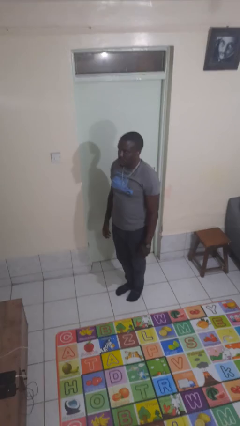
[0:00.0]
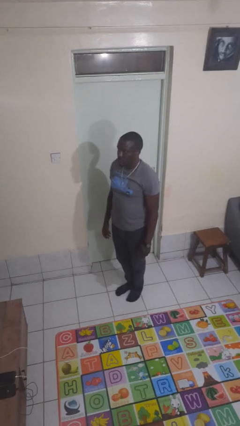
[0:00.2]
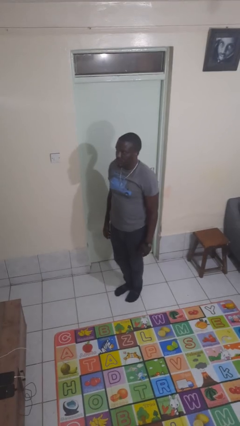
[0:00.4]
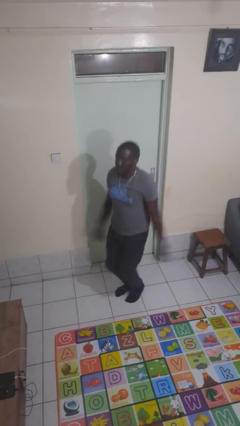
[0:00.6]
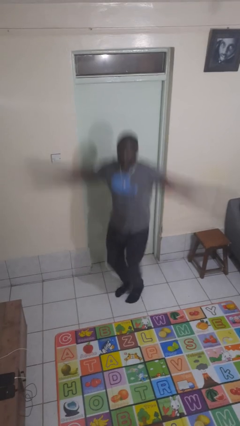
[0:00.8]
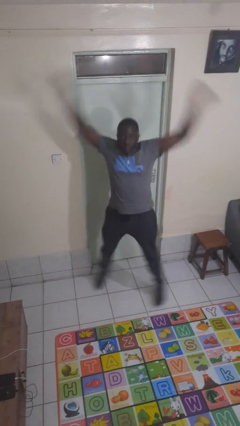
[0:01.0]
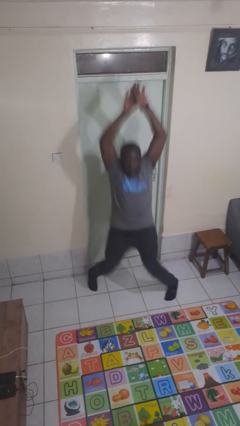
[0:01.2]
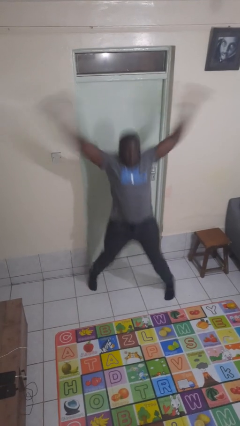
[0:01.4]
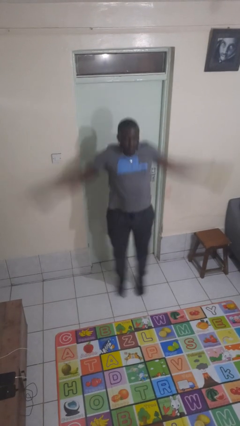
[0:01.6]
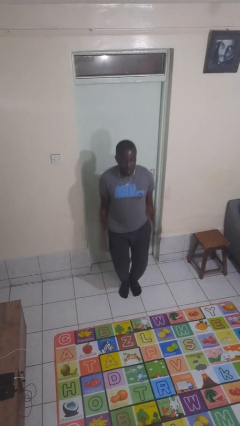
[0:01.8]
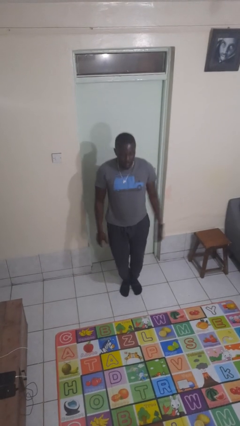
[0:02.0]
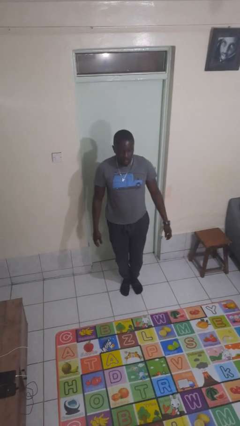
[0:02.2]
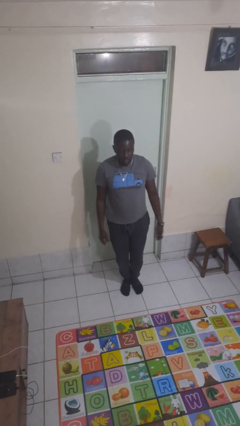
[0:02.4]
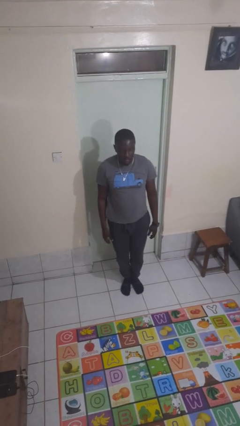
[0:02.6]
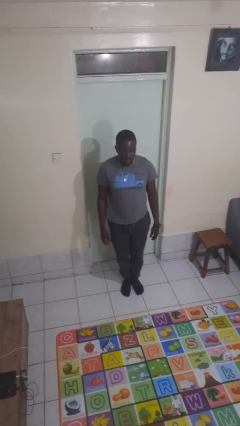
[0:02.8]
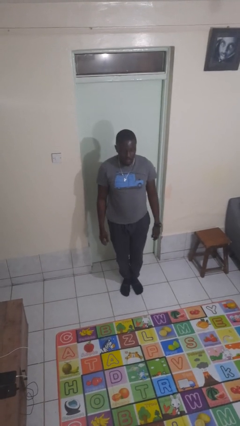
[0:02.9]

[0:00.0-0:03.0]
person exercises with jumping jacks

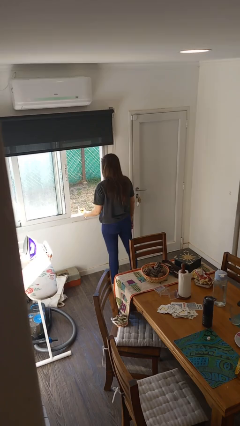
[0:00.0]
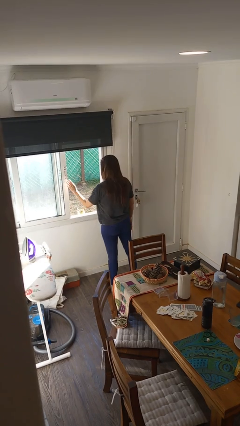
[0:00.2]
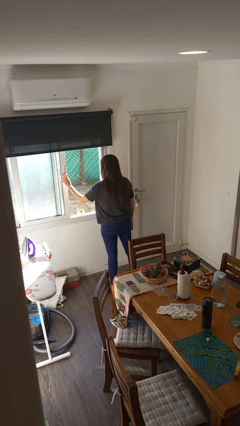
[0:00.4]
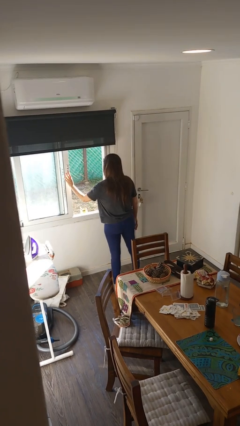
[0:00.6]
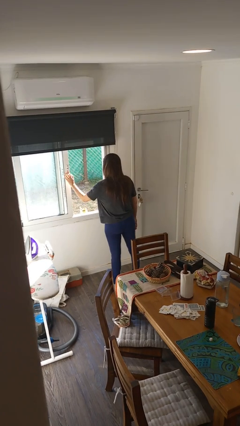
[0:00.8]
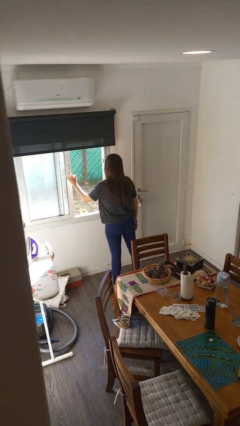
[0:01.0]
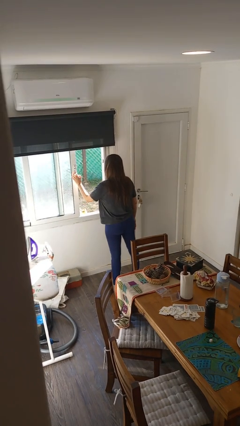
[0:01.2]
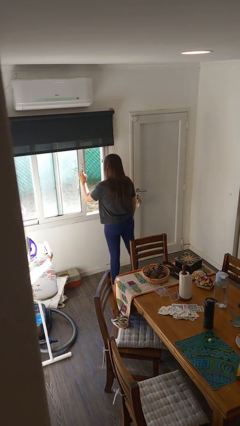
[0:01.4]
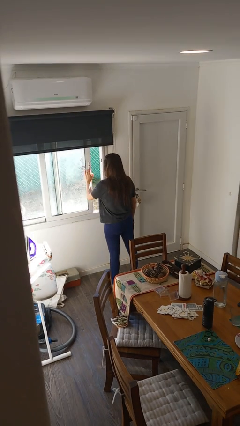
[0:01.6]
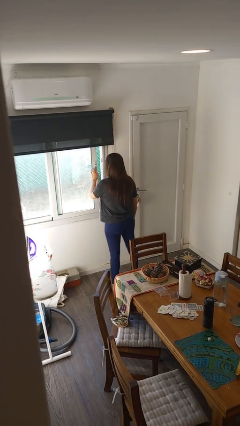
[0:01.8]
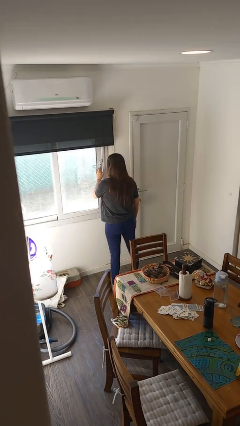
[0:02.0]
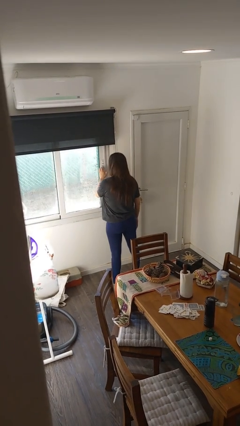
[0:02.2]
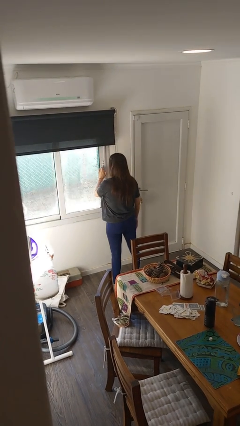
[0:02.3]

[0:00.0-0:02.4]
person closes home window

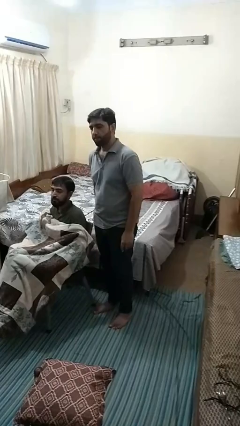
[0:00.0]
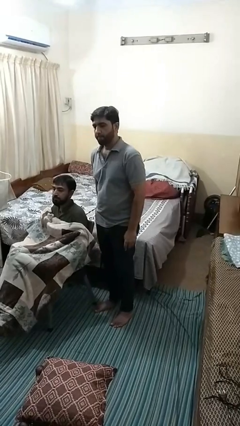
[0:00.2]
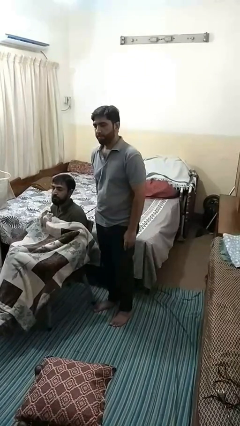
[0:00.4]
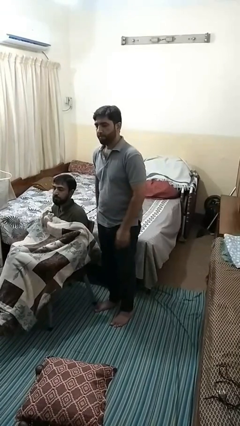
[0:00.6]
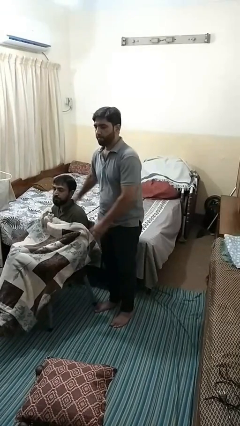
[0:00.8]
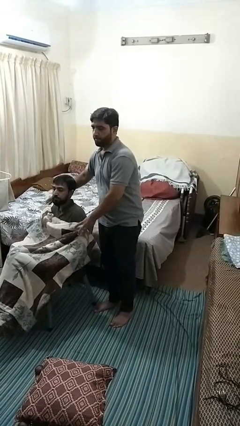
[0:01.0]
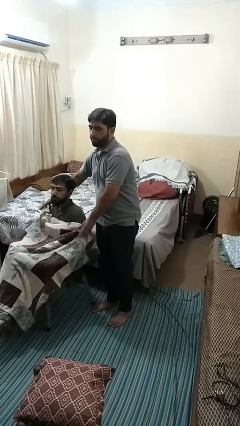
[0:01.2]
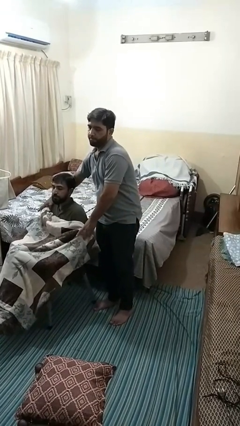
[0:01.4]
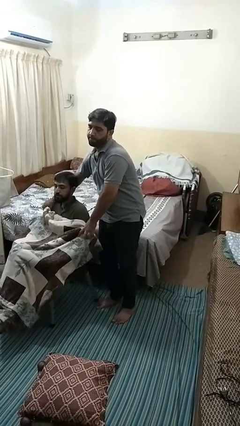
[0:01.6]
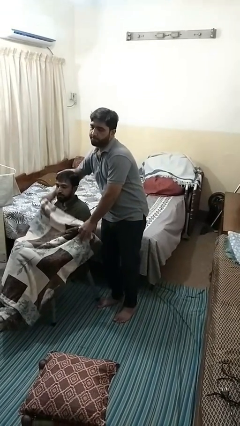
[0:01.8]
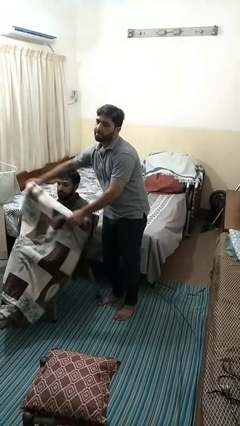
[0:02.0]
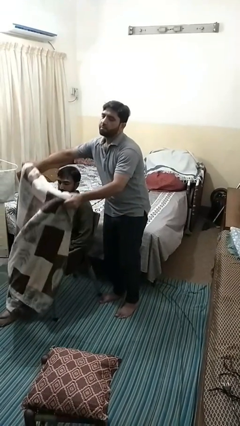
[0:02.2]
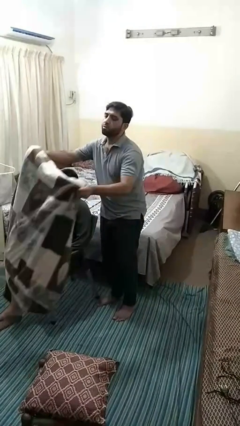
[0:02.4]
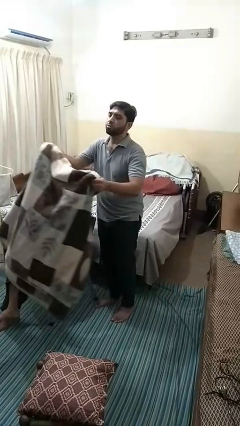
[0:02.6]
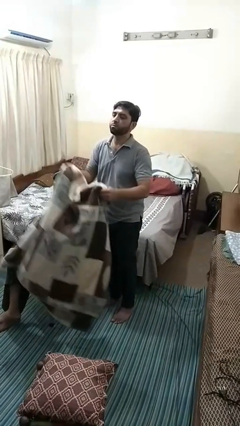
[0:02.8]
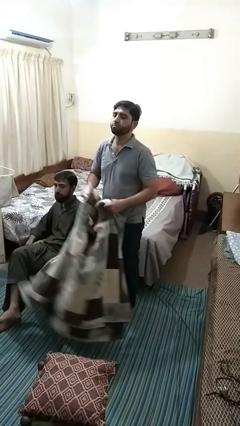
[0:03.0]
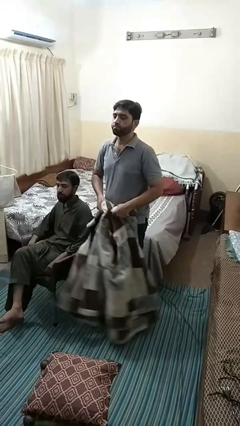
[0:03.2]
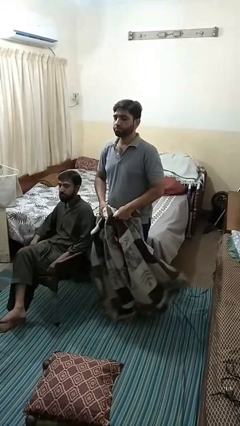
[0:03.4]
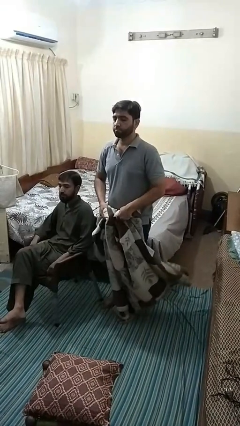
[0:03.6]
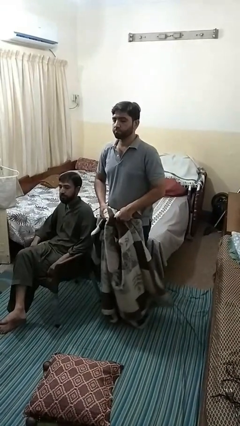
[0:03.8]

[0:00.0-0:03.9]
person uncovers friend with blanket

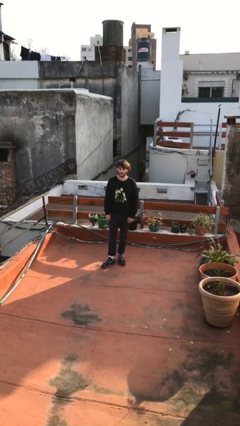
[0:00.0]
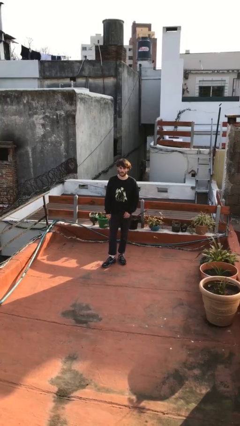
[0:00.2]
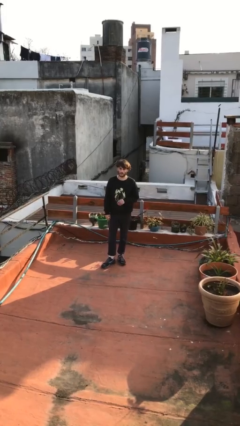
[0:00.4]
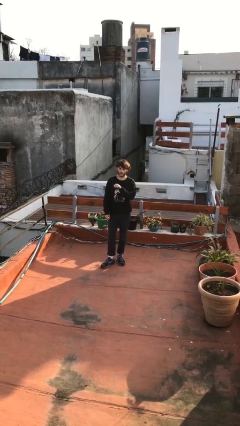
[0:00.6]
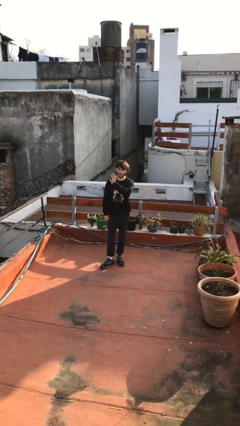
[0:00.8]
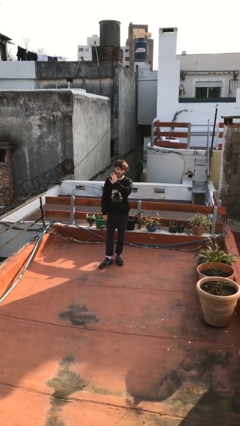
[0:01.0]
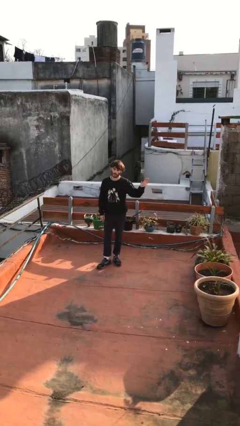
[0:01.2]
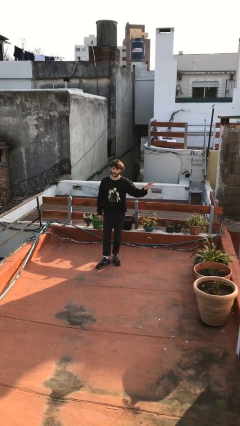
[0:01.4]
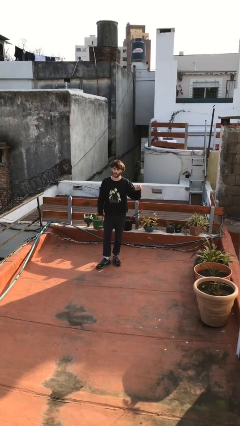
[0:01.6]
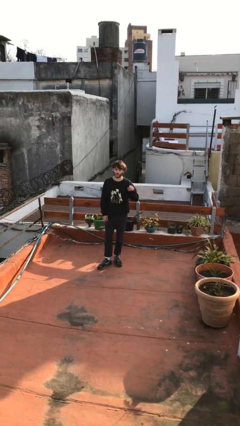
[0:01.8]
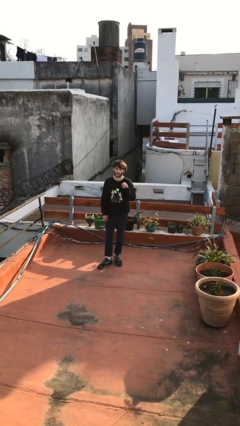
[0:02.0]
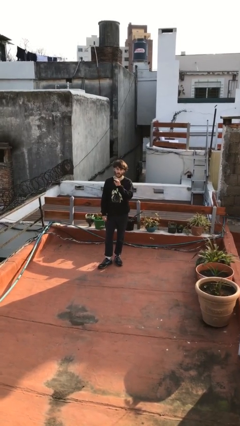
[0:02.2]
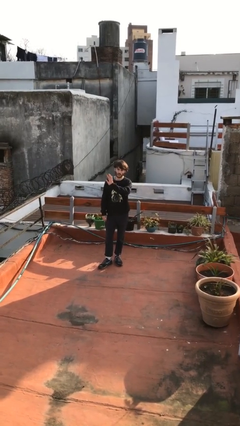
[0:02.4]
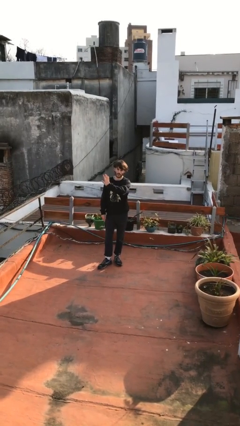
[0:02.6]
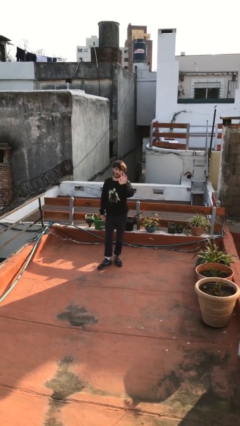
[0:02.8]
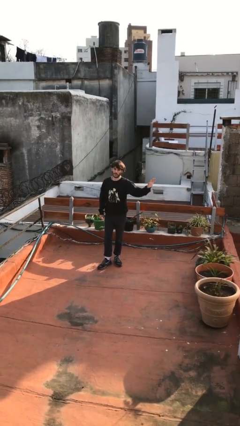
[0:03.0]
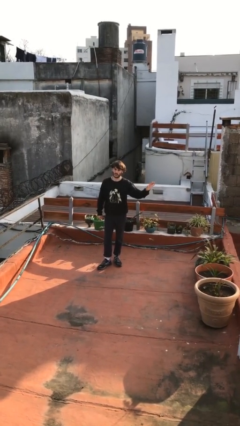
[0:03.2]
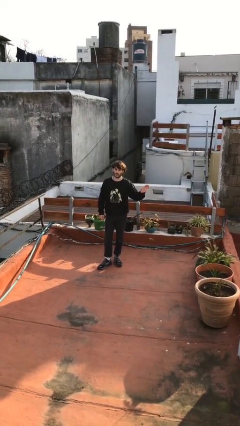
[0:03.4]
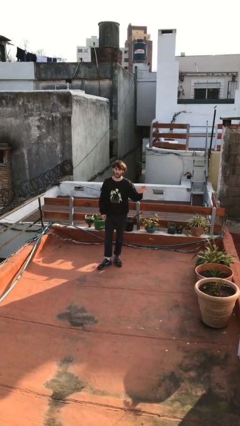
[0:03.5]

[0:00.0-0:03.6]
person gestures swipe left

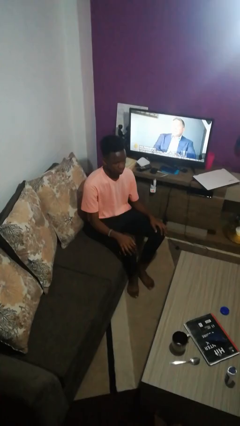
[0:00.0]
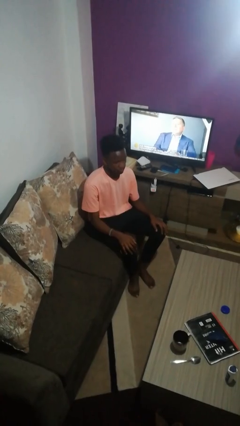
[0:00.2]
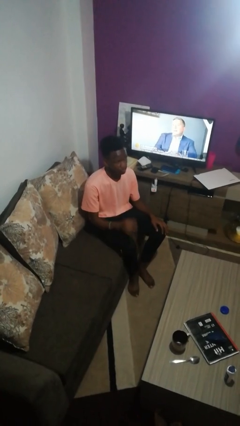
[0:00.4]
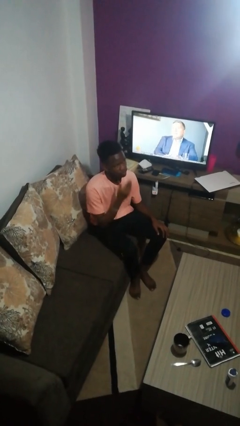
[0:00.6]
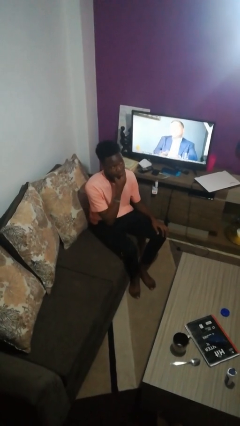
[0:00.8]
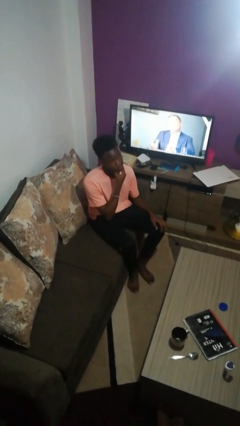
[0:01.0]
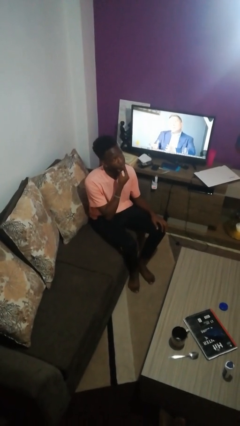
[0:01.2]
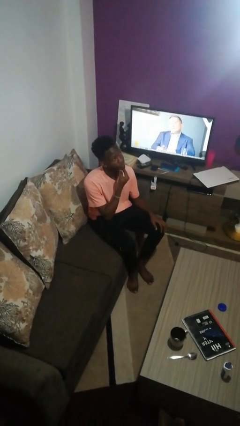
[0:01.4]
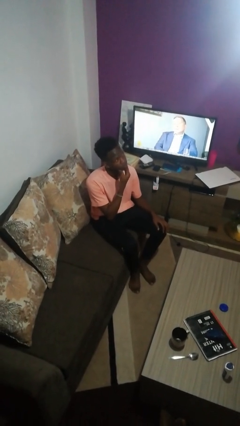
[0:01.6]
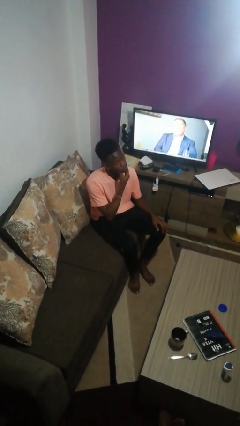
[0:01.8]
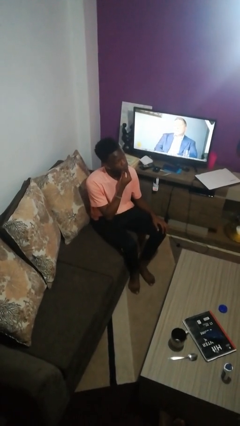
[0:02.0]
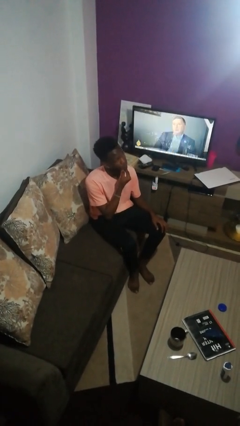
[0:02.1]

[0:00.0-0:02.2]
person strokes chin

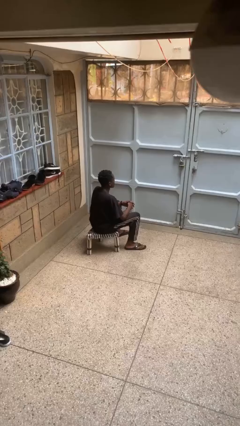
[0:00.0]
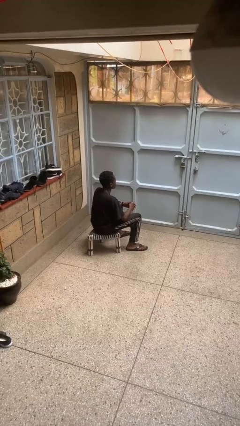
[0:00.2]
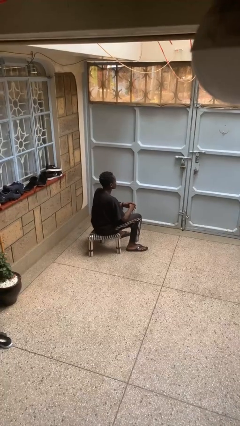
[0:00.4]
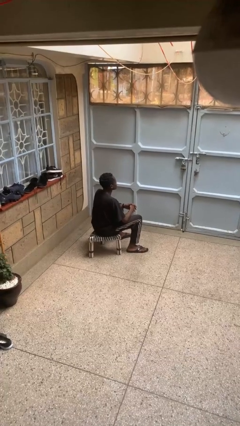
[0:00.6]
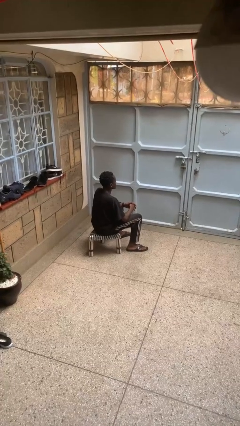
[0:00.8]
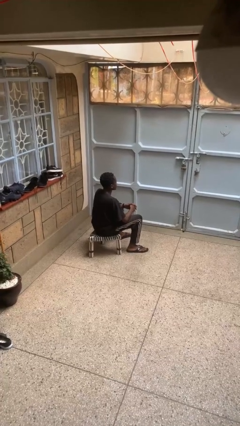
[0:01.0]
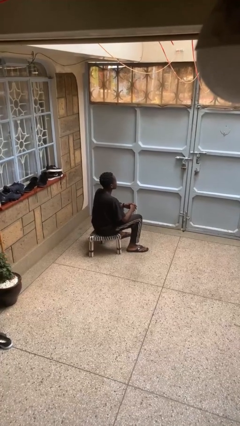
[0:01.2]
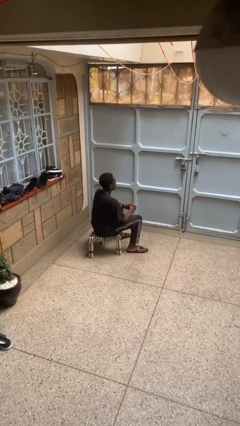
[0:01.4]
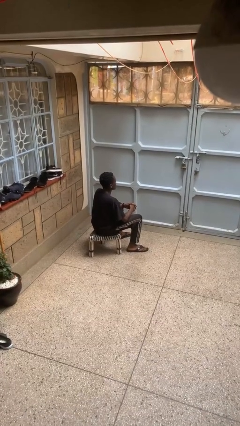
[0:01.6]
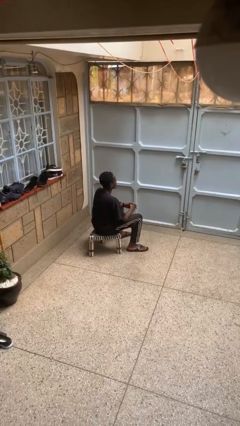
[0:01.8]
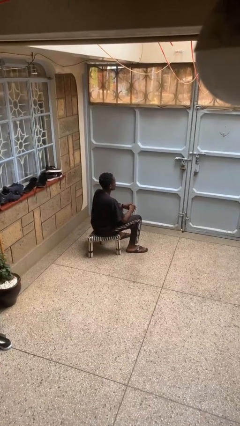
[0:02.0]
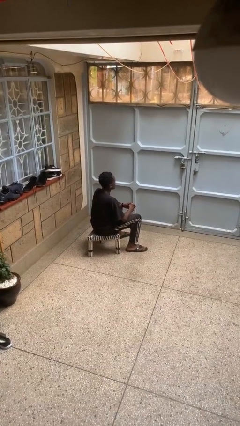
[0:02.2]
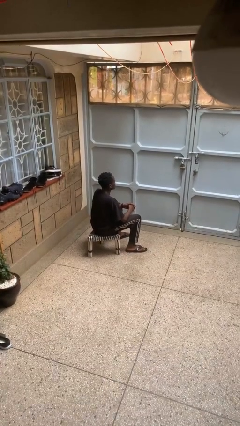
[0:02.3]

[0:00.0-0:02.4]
person nods head
